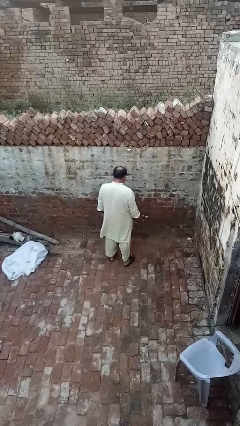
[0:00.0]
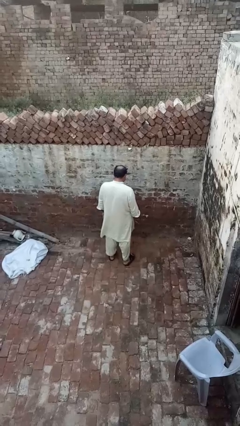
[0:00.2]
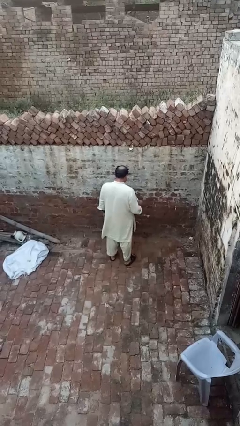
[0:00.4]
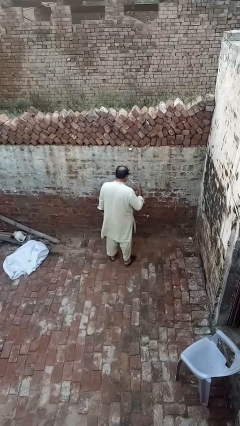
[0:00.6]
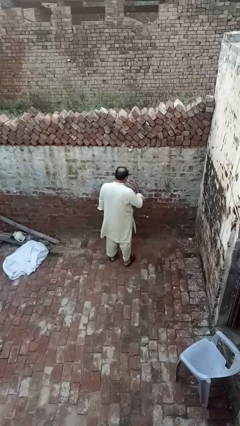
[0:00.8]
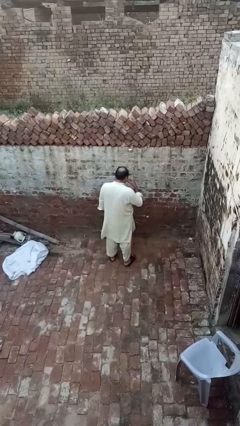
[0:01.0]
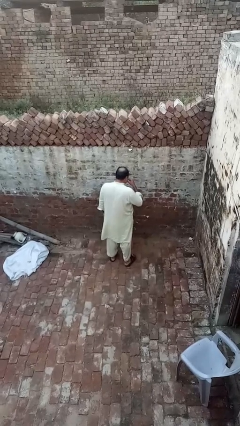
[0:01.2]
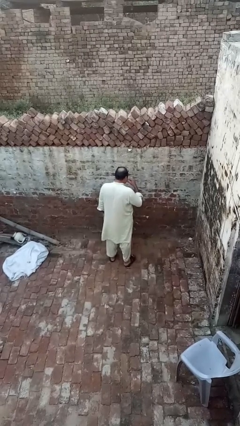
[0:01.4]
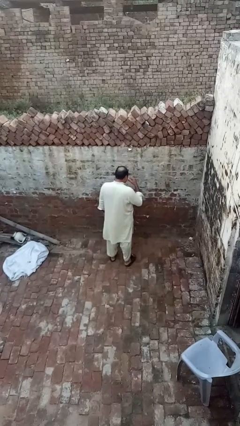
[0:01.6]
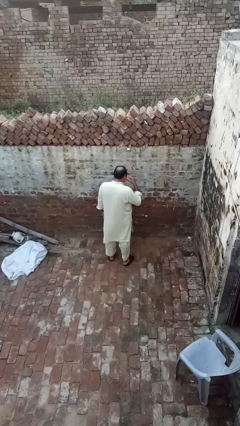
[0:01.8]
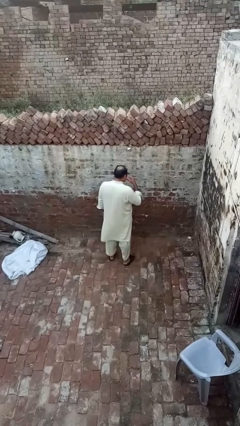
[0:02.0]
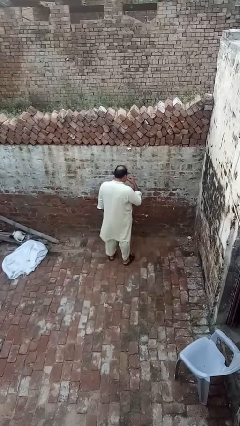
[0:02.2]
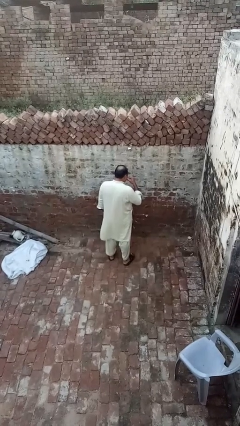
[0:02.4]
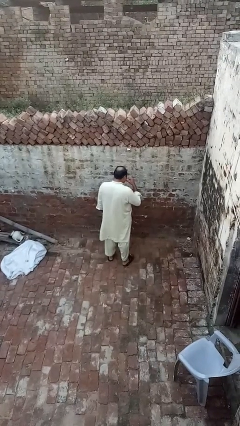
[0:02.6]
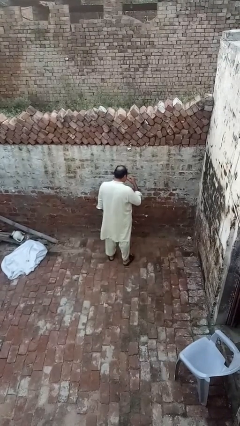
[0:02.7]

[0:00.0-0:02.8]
person brushes teeth

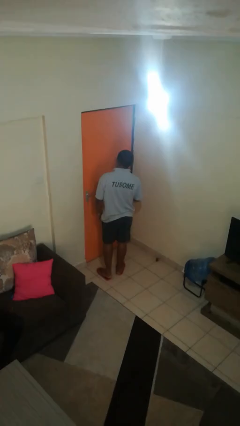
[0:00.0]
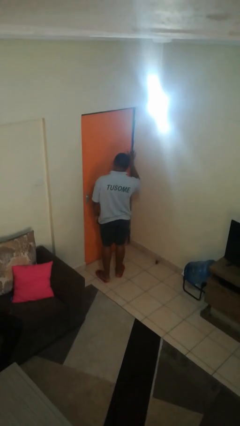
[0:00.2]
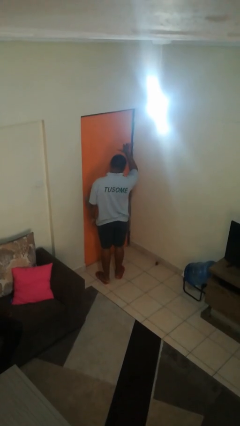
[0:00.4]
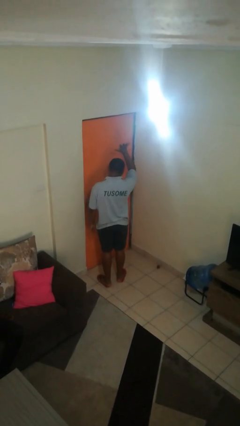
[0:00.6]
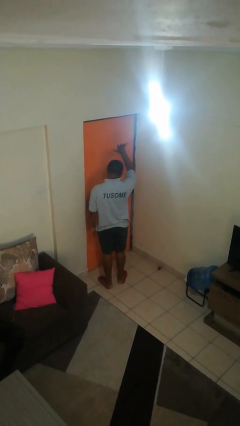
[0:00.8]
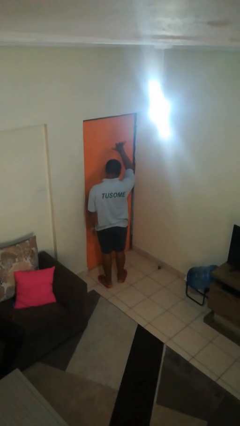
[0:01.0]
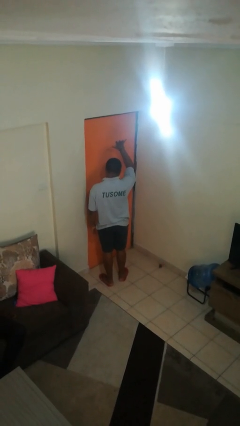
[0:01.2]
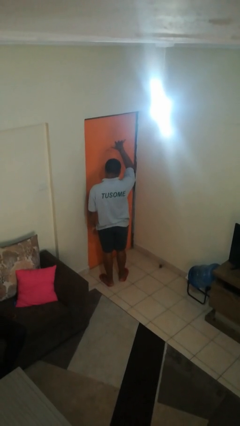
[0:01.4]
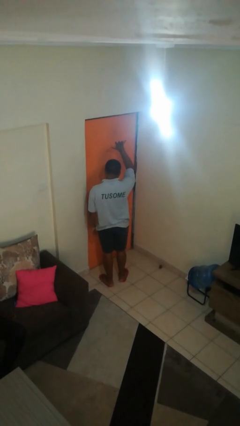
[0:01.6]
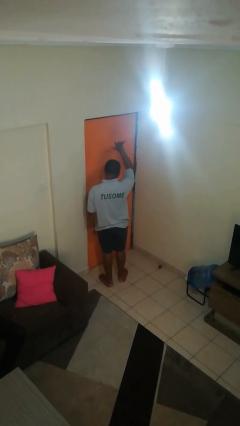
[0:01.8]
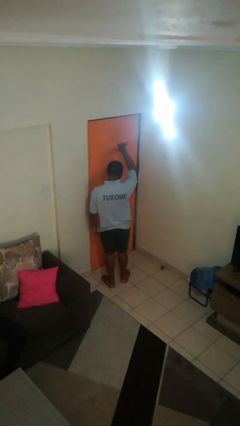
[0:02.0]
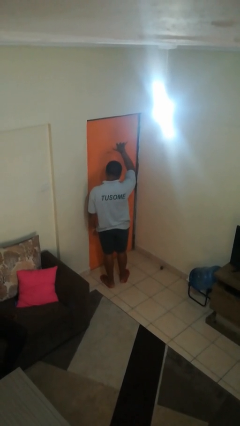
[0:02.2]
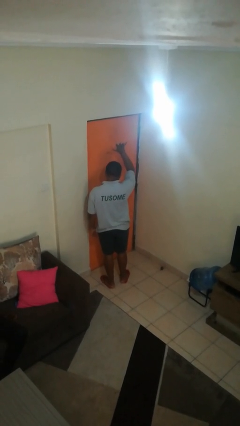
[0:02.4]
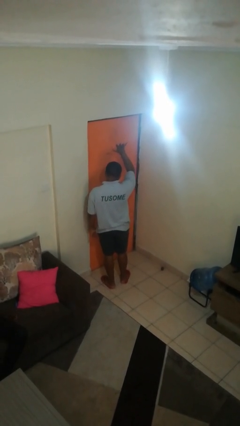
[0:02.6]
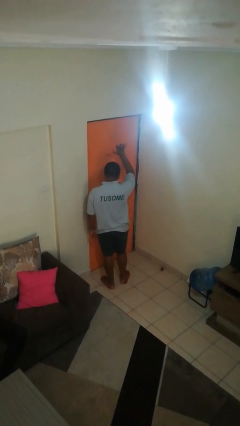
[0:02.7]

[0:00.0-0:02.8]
person gestures number five

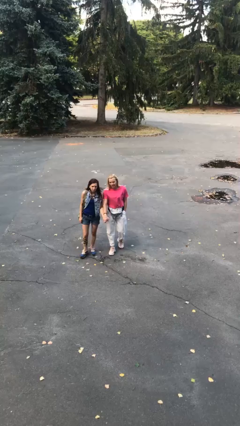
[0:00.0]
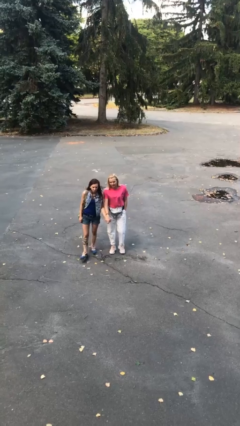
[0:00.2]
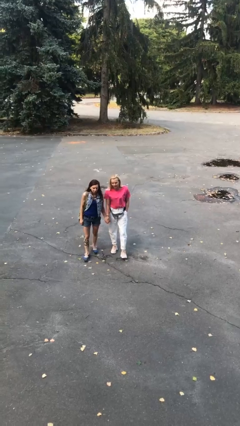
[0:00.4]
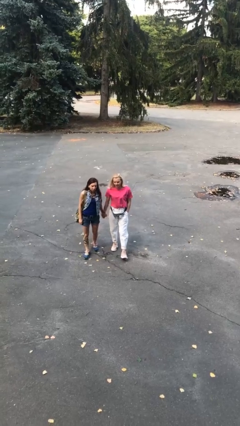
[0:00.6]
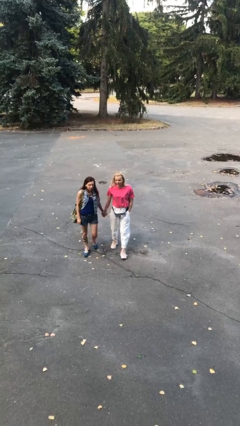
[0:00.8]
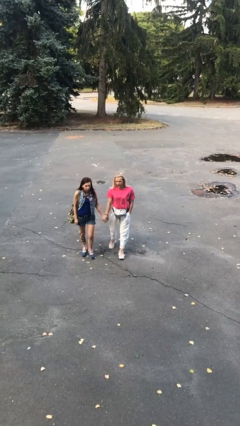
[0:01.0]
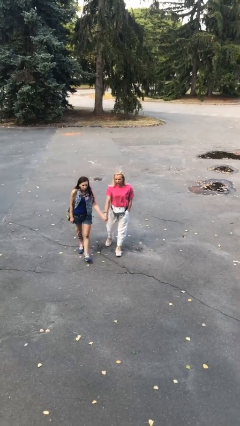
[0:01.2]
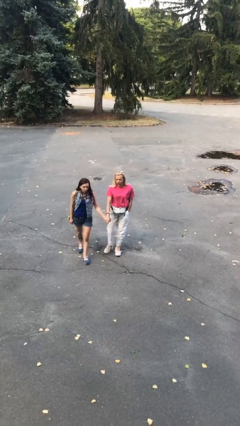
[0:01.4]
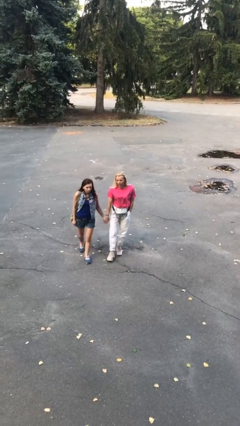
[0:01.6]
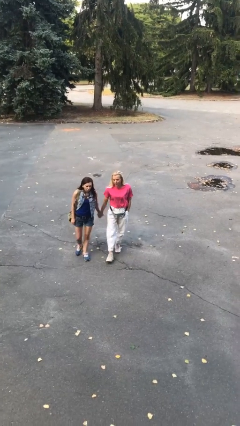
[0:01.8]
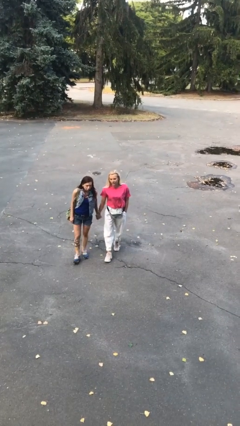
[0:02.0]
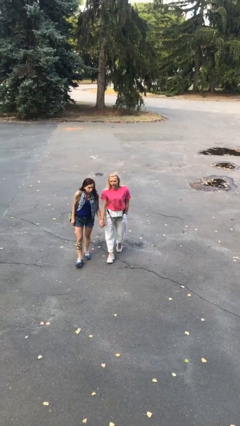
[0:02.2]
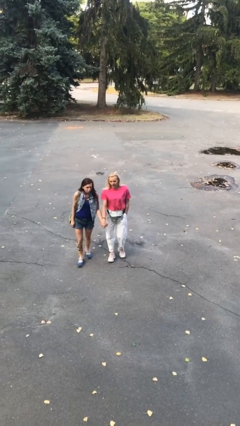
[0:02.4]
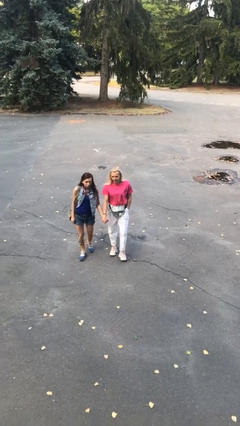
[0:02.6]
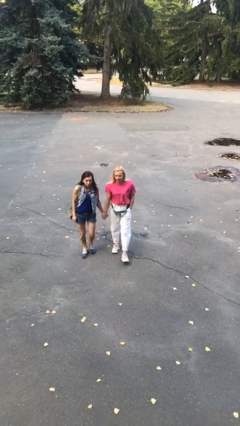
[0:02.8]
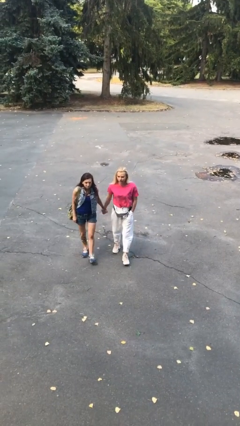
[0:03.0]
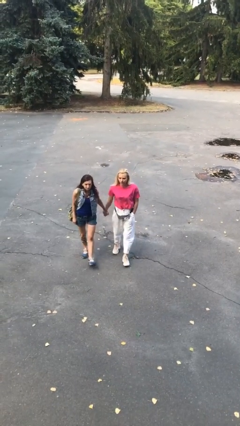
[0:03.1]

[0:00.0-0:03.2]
person holds hand

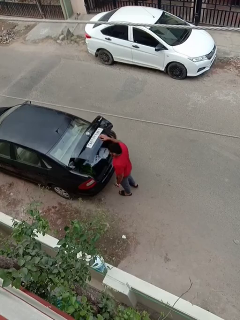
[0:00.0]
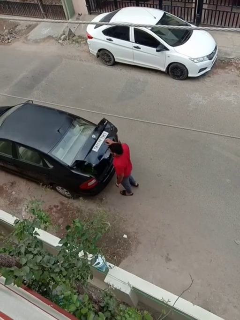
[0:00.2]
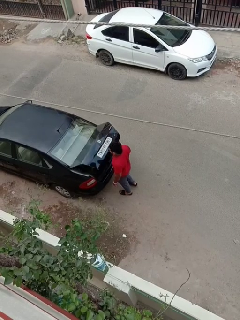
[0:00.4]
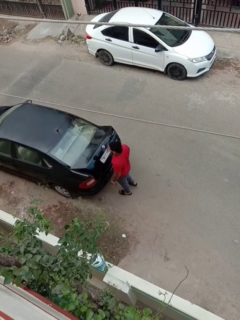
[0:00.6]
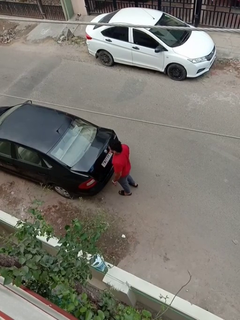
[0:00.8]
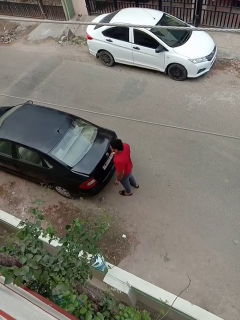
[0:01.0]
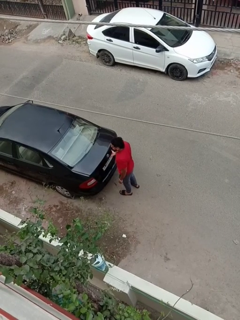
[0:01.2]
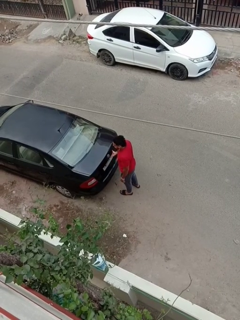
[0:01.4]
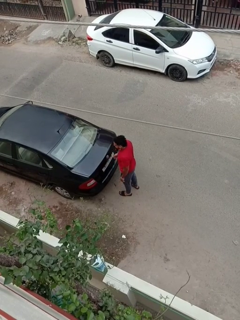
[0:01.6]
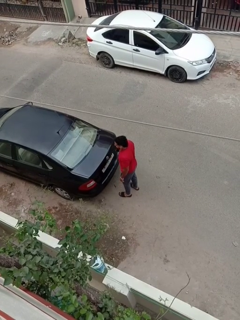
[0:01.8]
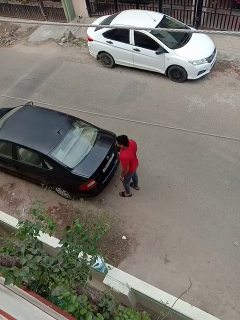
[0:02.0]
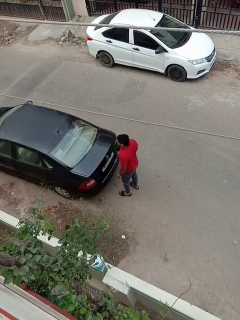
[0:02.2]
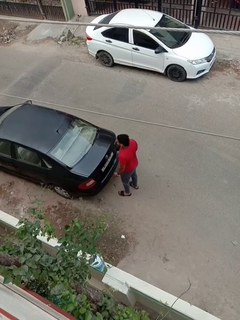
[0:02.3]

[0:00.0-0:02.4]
person closes car trunk

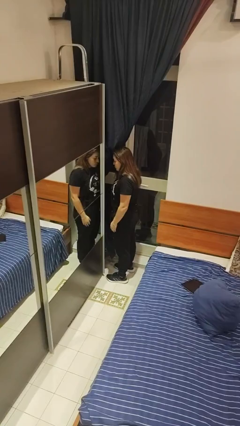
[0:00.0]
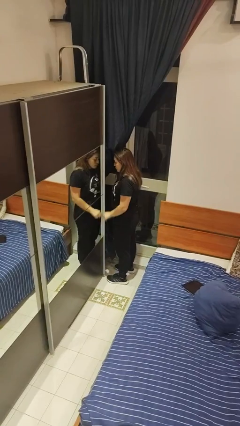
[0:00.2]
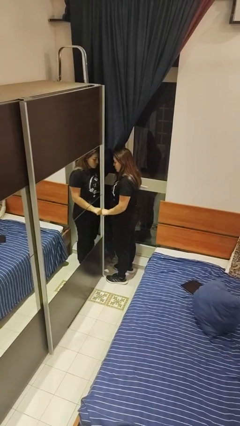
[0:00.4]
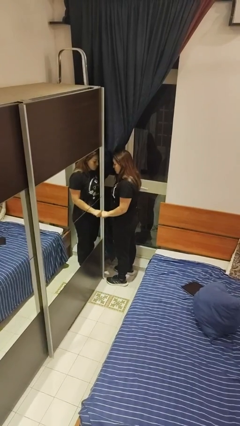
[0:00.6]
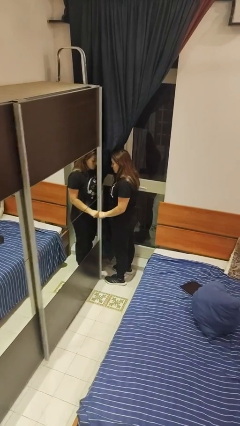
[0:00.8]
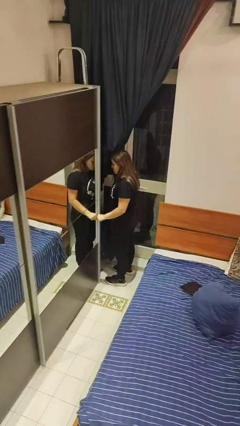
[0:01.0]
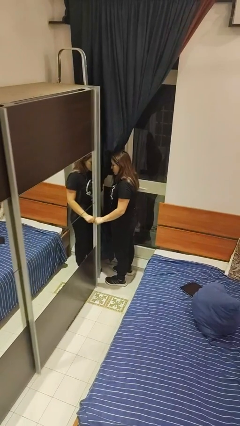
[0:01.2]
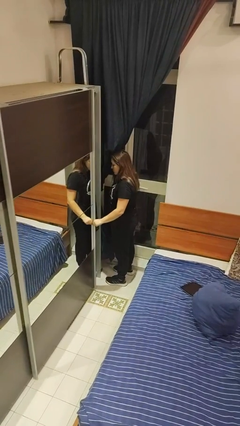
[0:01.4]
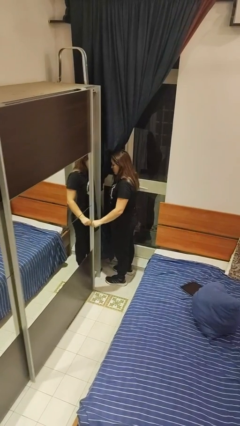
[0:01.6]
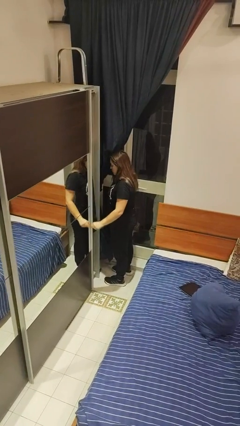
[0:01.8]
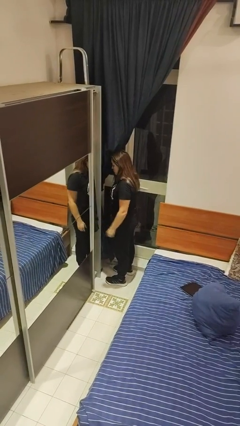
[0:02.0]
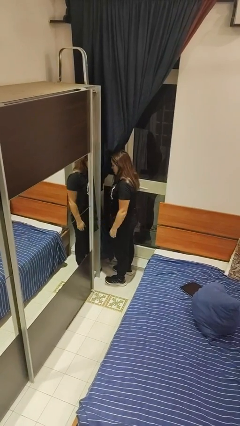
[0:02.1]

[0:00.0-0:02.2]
person opens closet door

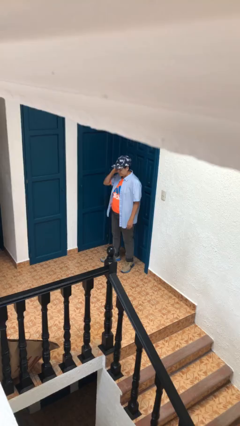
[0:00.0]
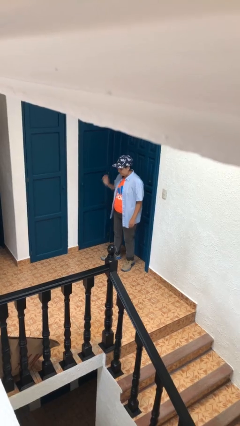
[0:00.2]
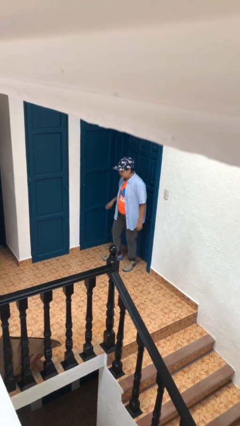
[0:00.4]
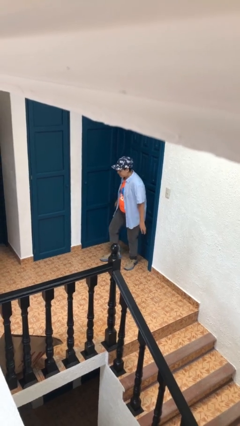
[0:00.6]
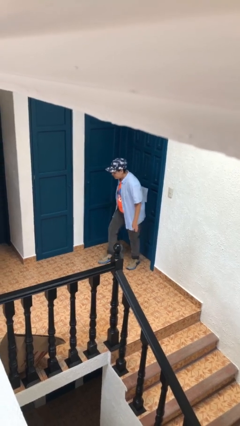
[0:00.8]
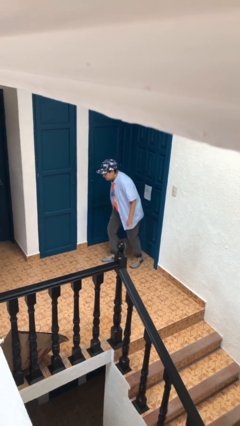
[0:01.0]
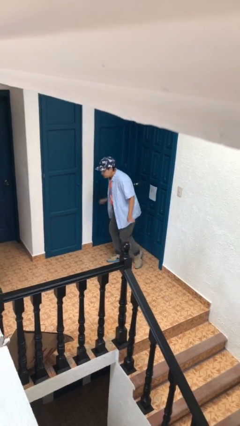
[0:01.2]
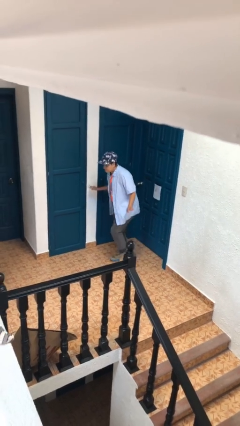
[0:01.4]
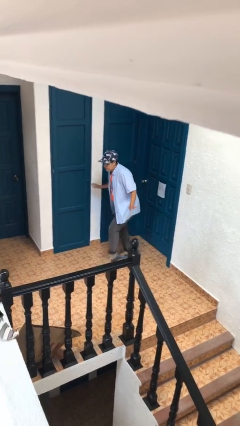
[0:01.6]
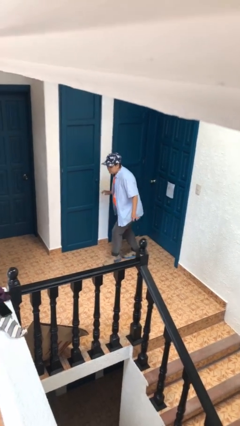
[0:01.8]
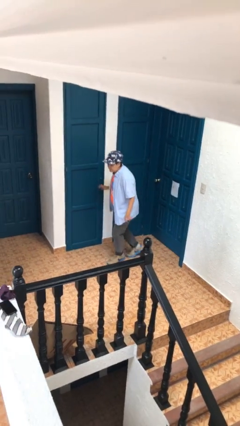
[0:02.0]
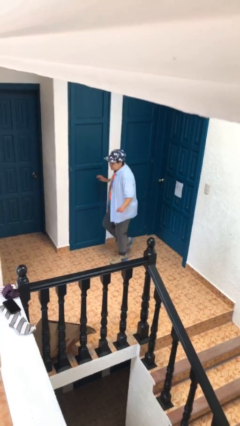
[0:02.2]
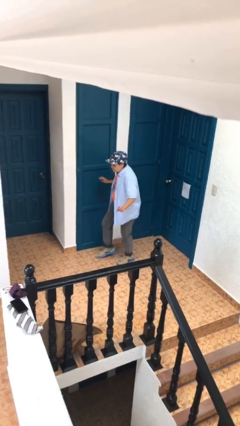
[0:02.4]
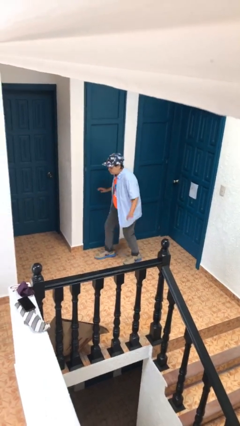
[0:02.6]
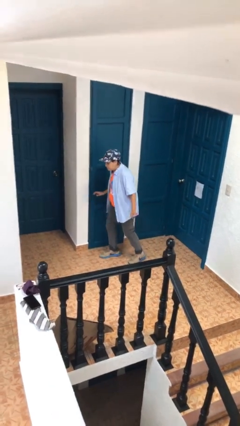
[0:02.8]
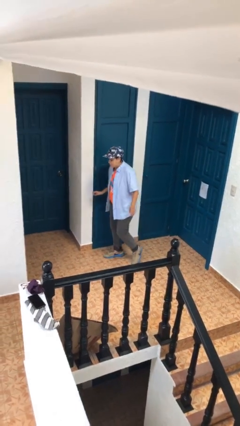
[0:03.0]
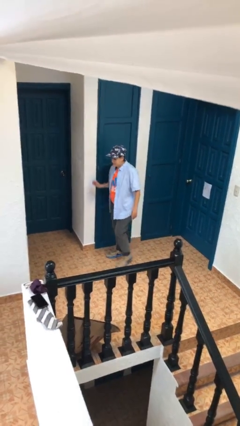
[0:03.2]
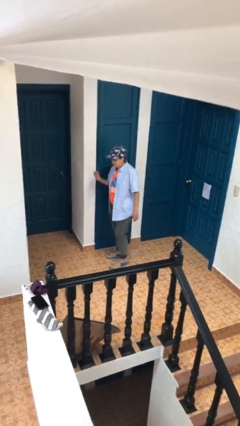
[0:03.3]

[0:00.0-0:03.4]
person walks tiptoe

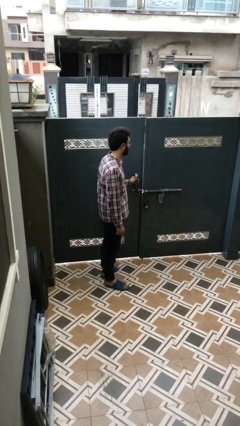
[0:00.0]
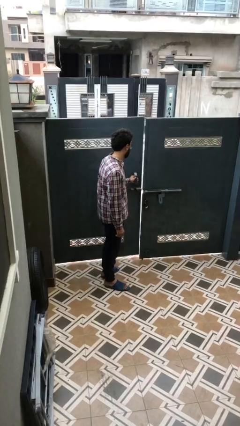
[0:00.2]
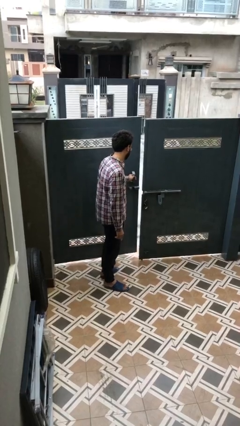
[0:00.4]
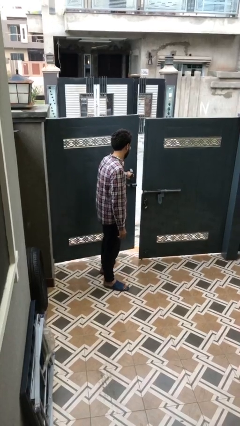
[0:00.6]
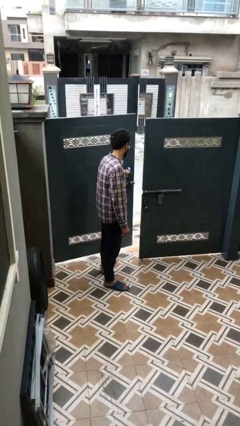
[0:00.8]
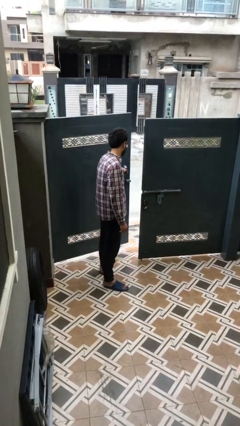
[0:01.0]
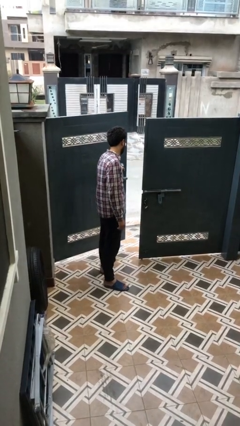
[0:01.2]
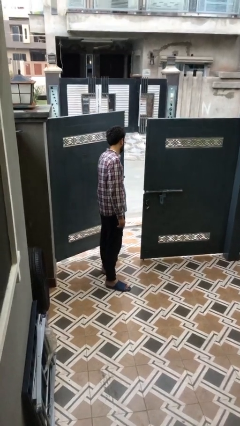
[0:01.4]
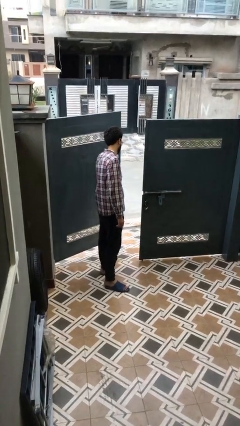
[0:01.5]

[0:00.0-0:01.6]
person opens facility door
